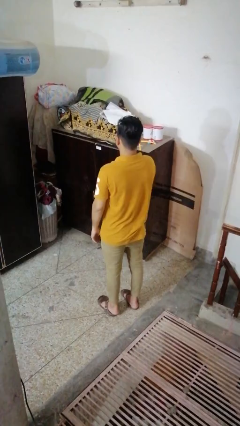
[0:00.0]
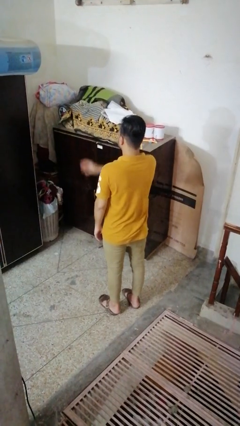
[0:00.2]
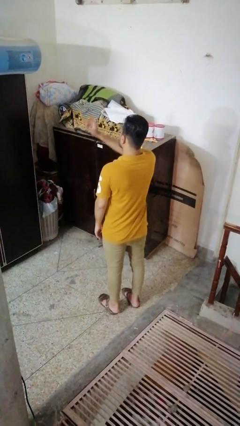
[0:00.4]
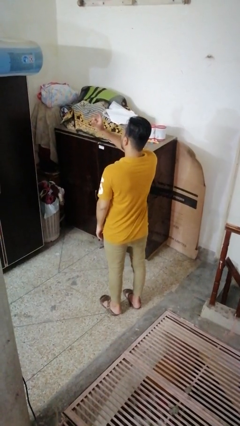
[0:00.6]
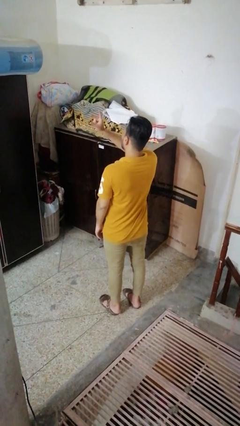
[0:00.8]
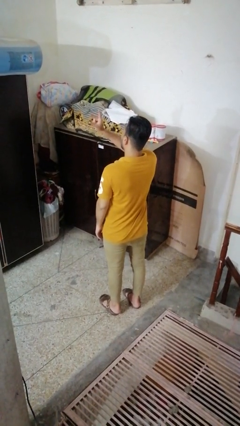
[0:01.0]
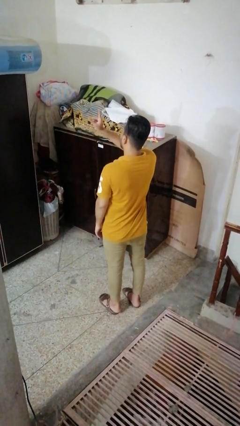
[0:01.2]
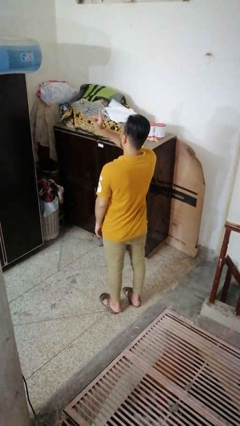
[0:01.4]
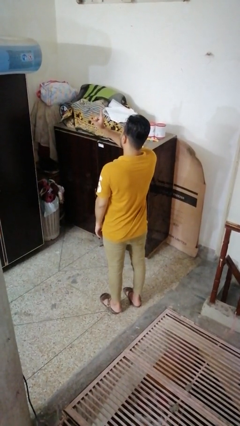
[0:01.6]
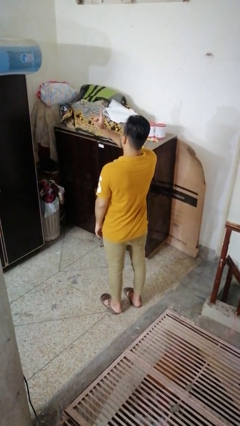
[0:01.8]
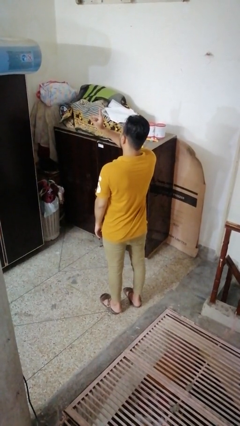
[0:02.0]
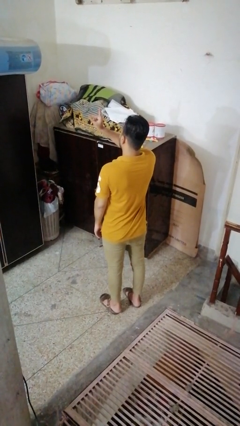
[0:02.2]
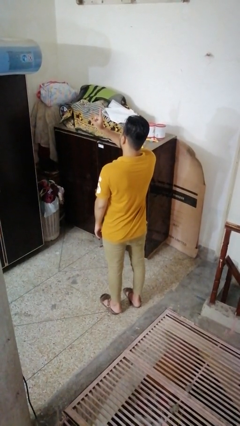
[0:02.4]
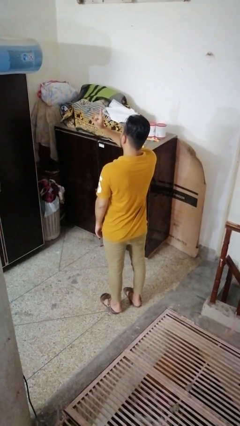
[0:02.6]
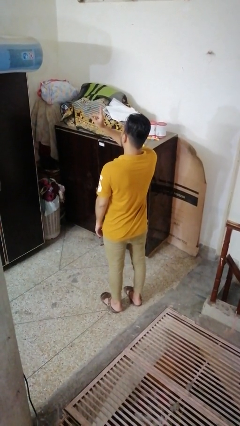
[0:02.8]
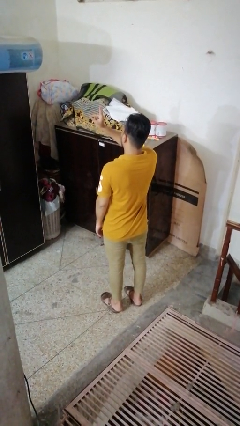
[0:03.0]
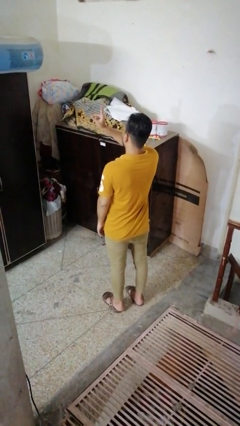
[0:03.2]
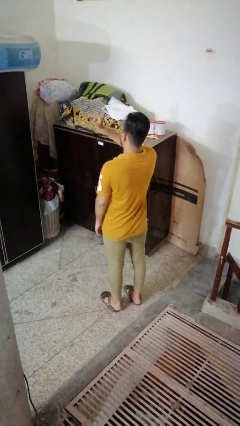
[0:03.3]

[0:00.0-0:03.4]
person snaps fingers

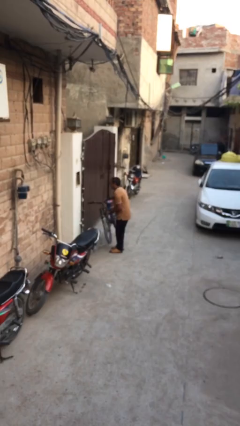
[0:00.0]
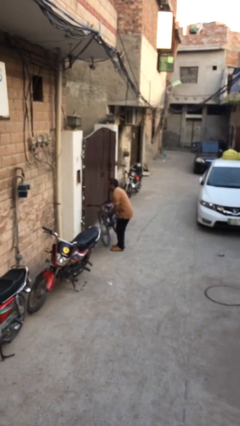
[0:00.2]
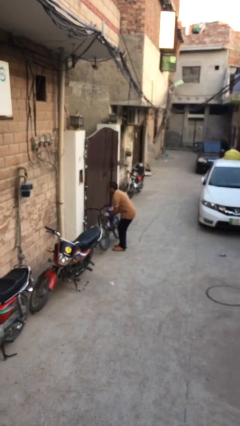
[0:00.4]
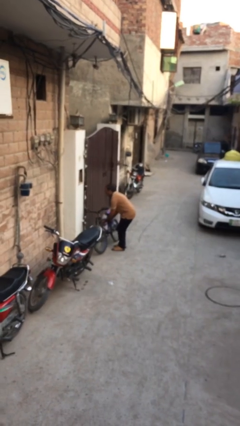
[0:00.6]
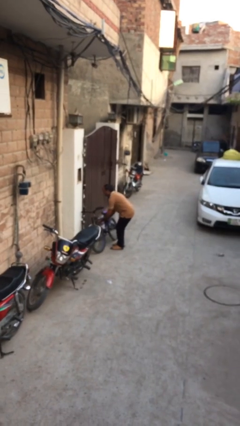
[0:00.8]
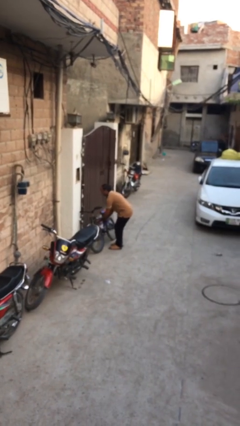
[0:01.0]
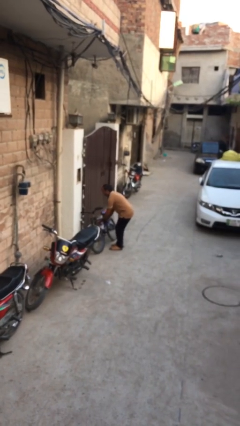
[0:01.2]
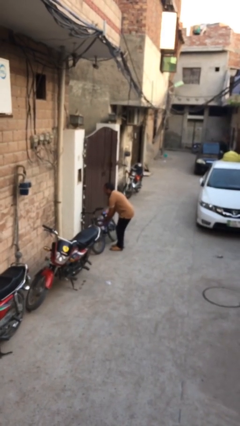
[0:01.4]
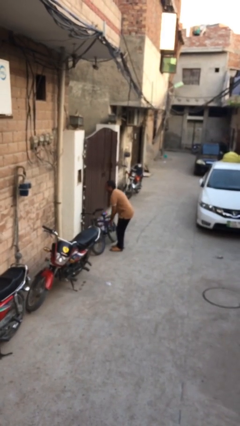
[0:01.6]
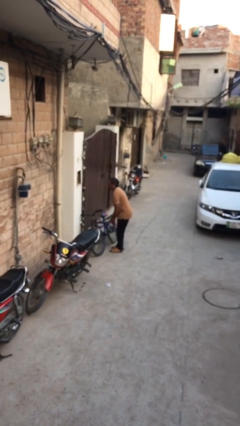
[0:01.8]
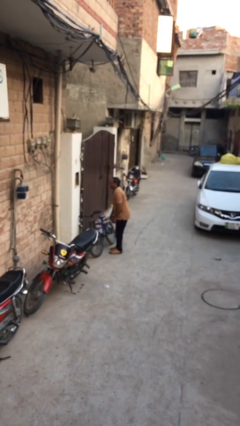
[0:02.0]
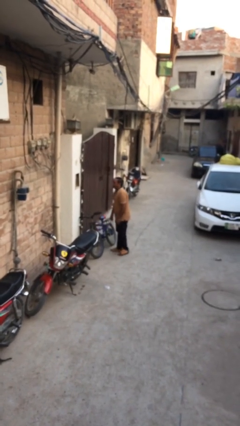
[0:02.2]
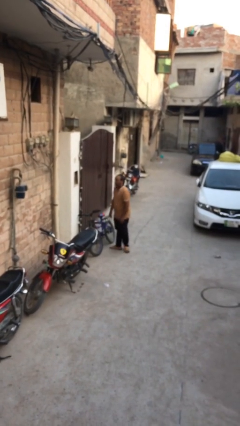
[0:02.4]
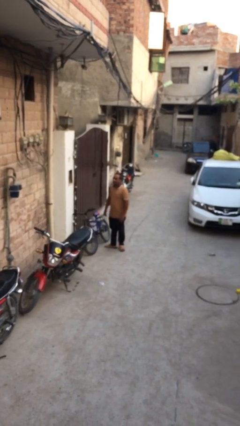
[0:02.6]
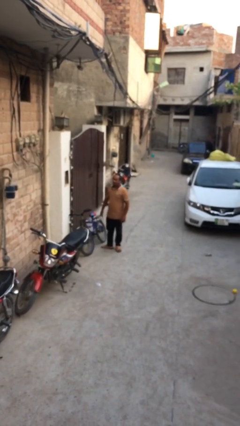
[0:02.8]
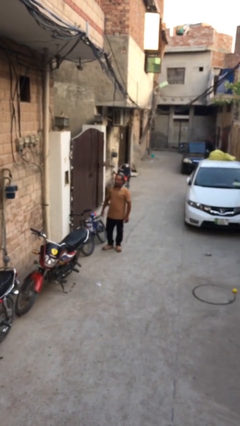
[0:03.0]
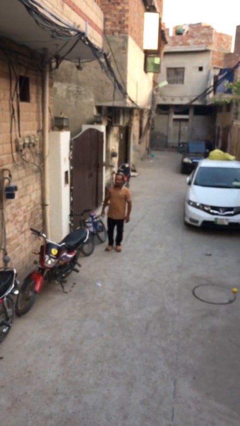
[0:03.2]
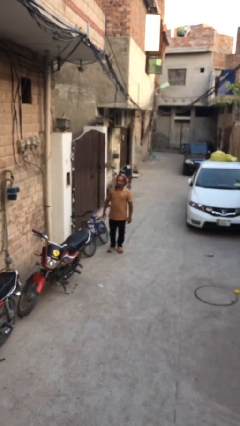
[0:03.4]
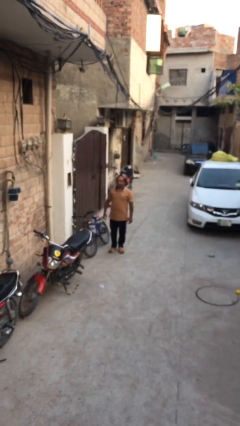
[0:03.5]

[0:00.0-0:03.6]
person puts down object on floor

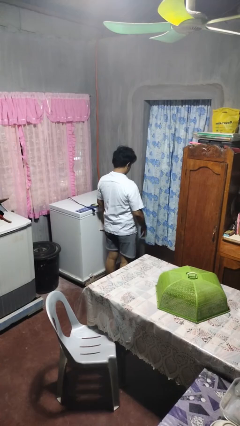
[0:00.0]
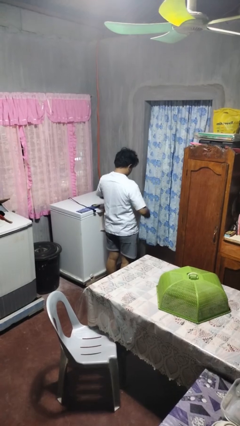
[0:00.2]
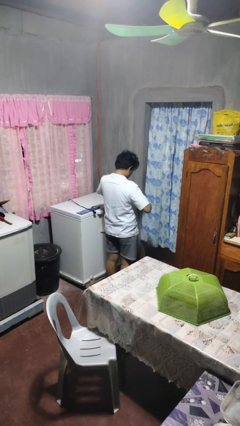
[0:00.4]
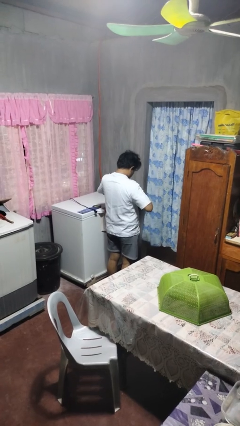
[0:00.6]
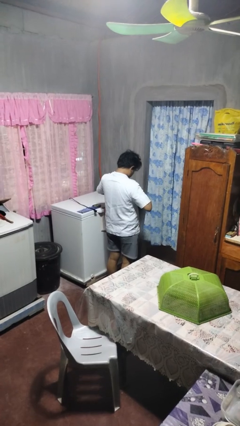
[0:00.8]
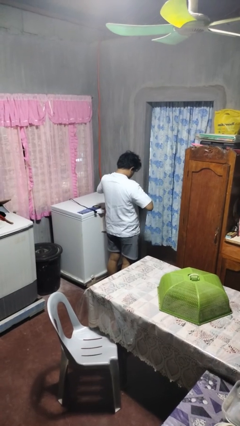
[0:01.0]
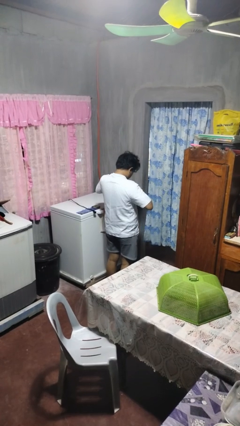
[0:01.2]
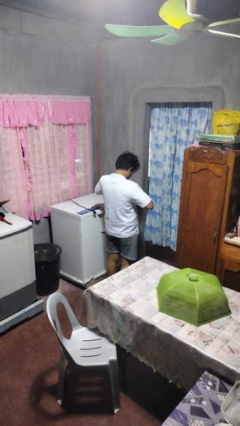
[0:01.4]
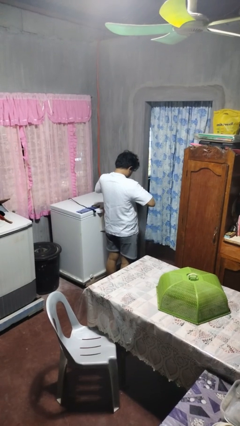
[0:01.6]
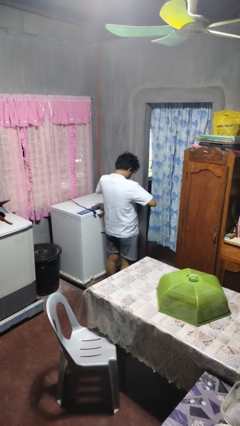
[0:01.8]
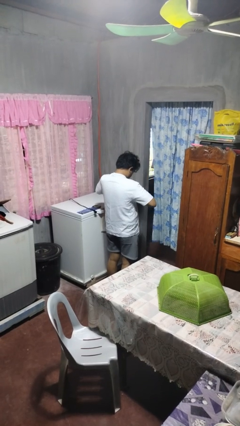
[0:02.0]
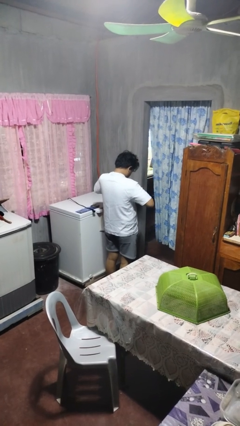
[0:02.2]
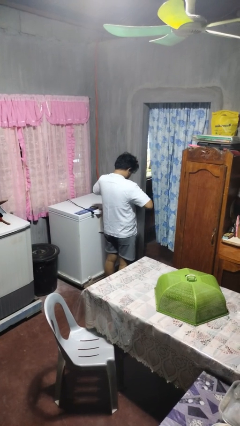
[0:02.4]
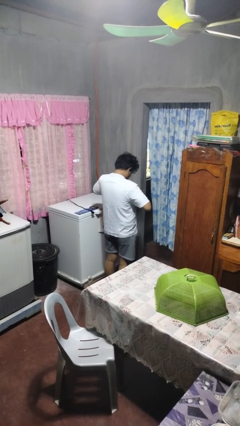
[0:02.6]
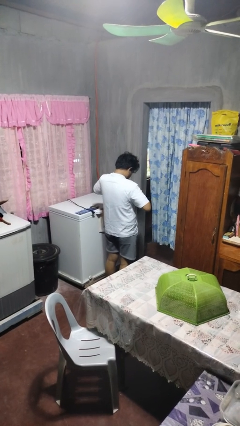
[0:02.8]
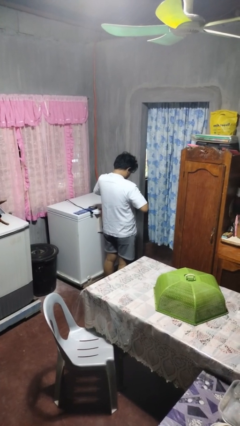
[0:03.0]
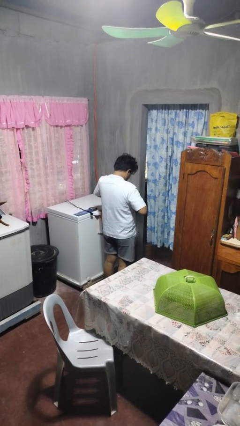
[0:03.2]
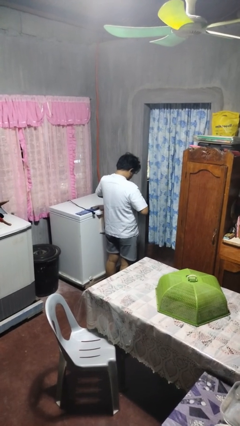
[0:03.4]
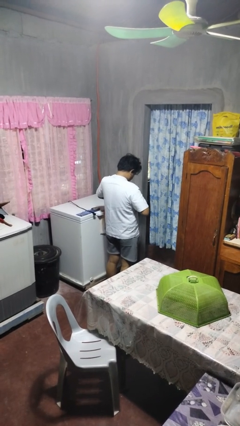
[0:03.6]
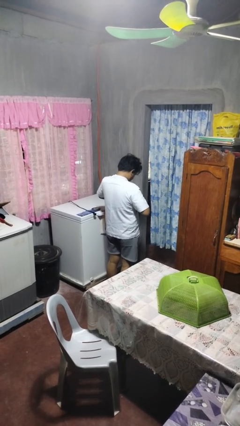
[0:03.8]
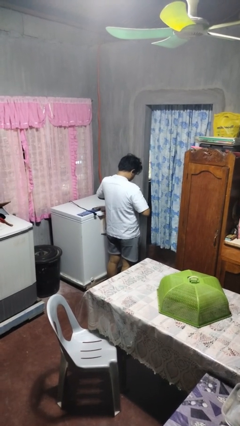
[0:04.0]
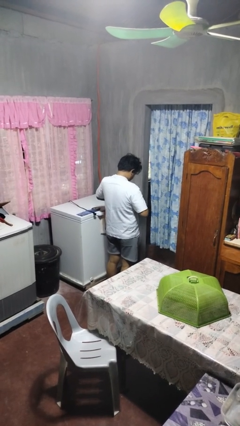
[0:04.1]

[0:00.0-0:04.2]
person unbuttons shirt

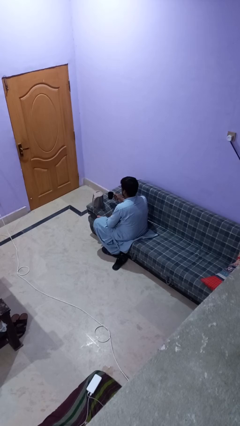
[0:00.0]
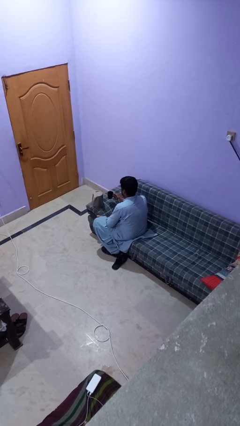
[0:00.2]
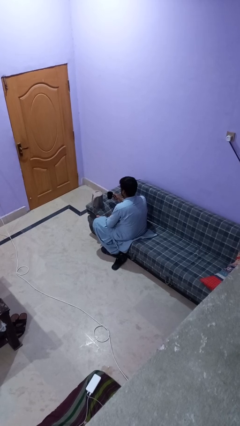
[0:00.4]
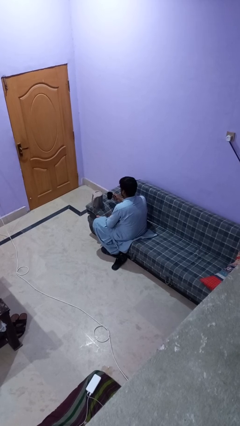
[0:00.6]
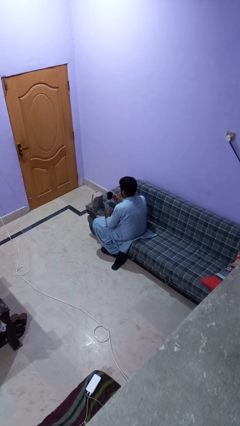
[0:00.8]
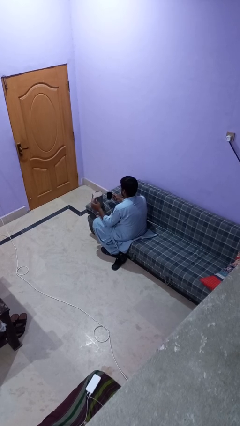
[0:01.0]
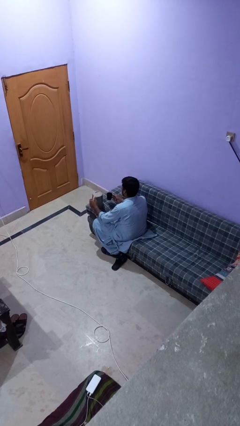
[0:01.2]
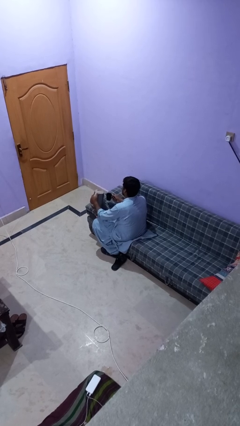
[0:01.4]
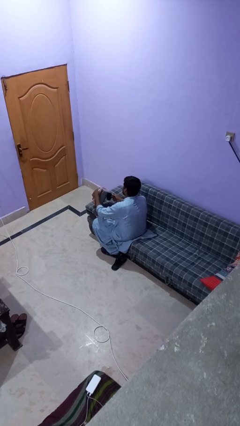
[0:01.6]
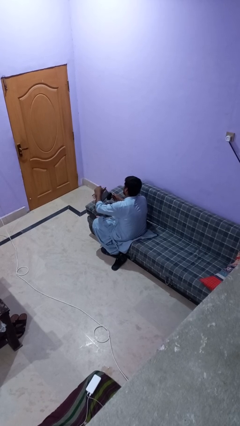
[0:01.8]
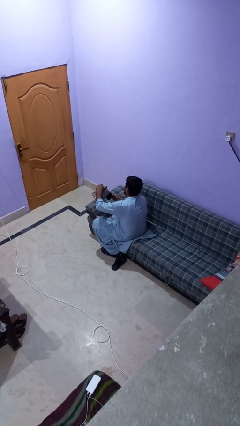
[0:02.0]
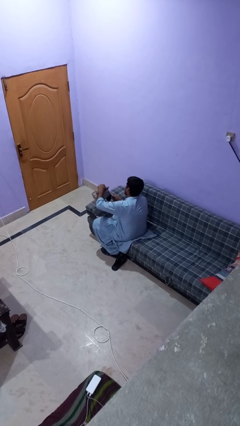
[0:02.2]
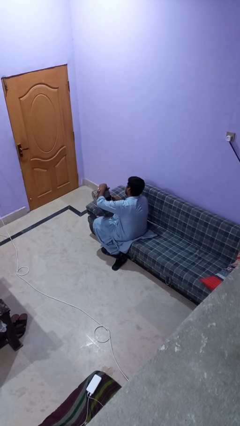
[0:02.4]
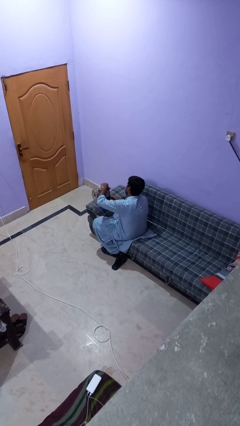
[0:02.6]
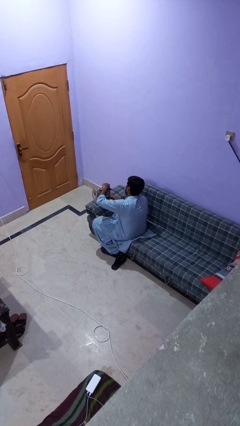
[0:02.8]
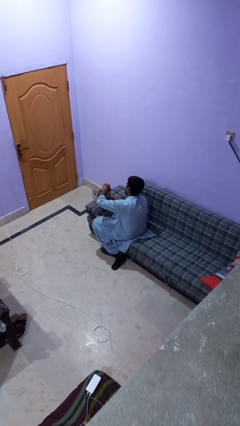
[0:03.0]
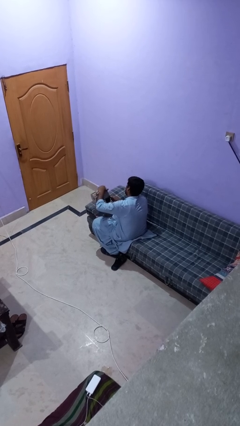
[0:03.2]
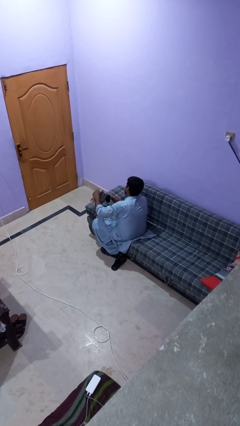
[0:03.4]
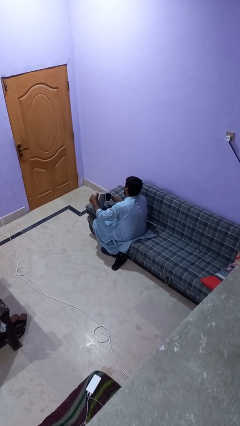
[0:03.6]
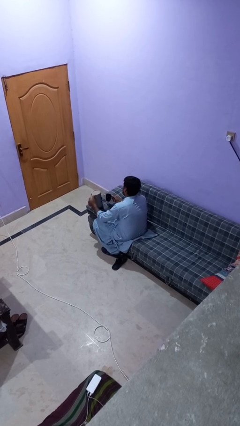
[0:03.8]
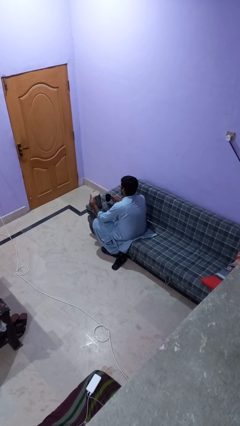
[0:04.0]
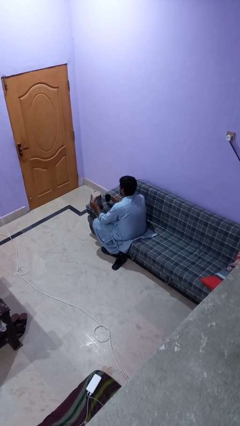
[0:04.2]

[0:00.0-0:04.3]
person pours coffee into mug

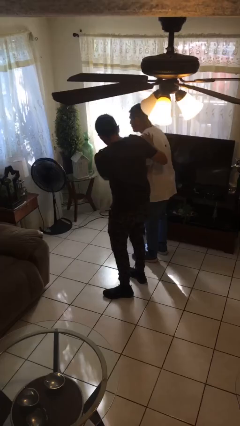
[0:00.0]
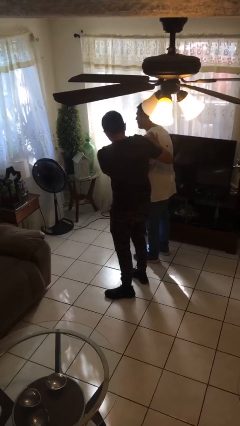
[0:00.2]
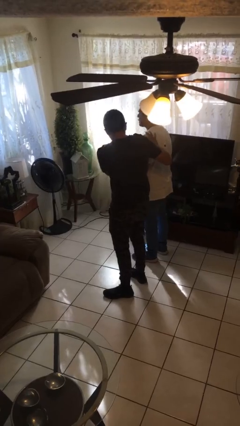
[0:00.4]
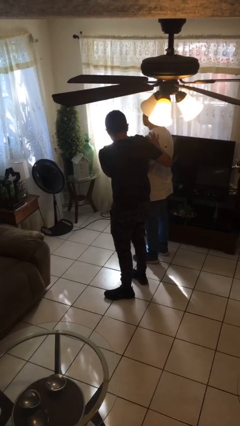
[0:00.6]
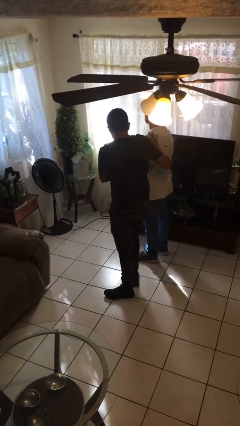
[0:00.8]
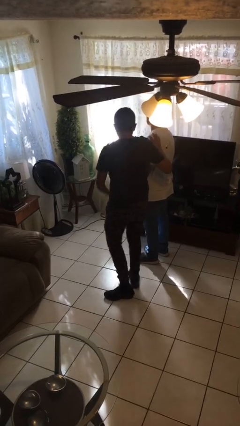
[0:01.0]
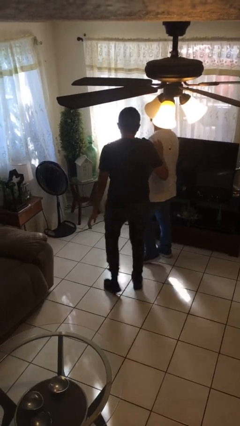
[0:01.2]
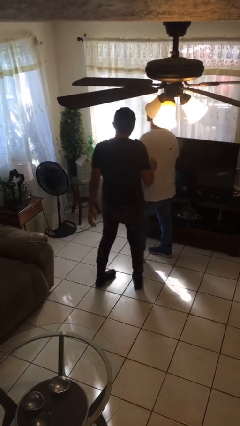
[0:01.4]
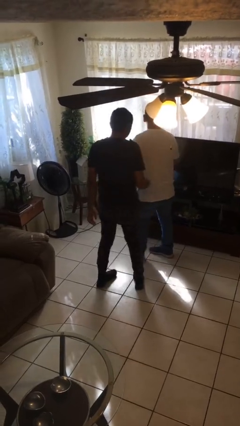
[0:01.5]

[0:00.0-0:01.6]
person bumps into person

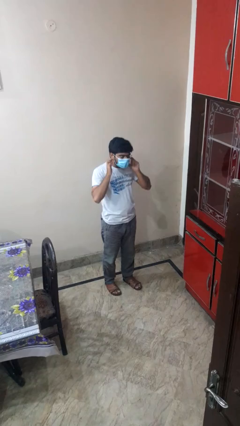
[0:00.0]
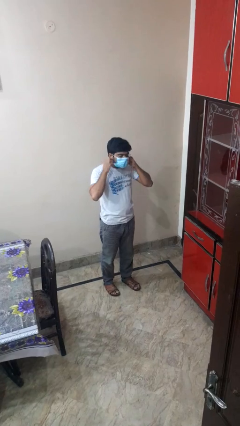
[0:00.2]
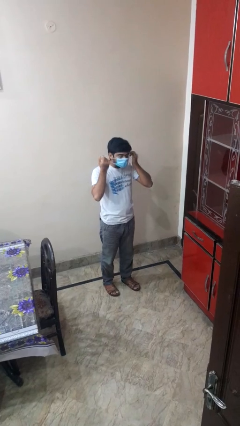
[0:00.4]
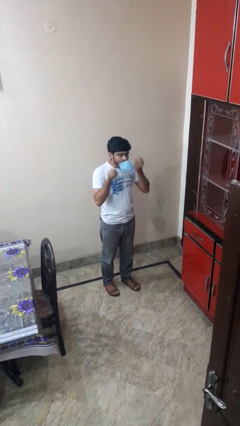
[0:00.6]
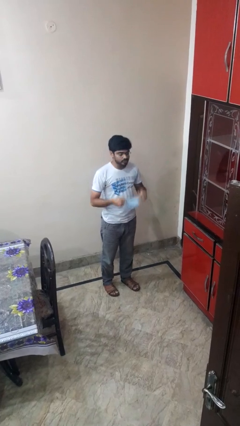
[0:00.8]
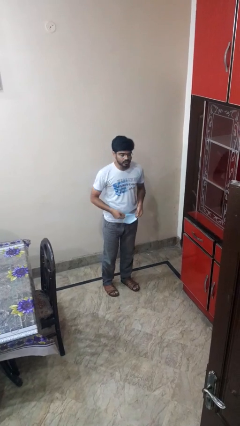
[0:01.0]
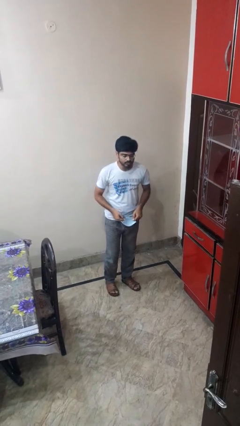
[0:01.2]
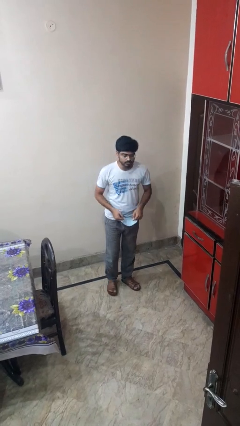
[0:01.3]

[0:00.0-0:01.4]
person takes off facemask
